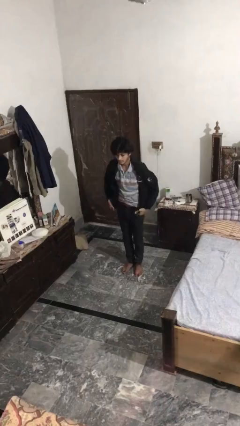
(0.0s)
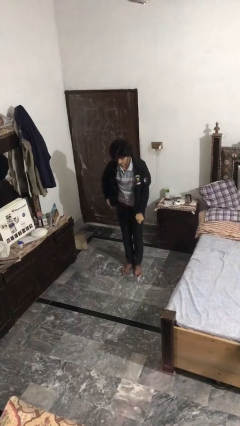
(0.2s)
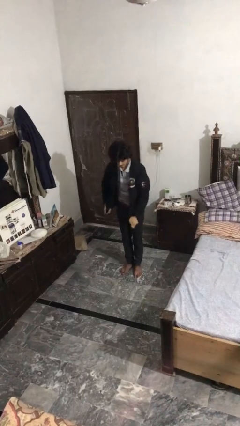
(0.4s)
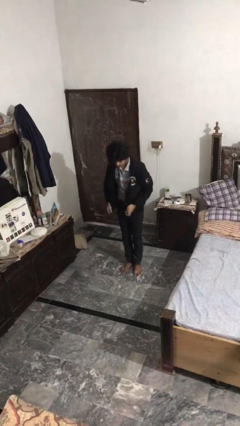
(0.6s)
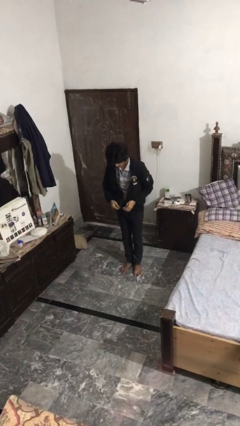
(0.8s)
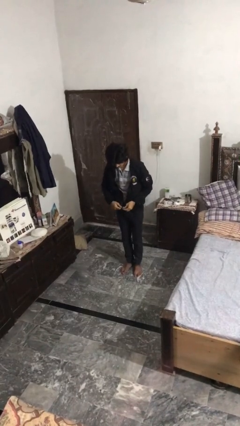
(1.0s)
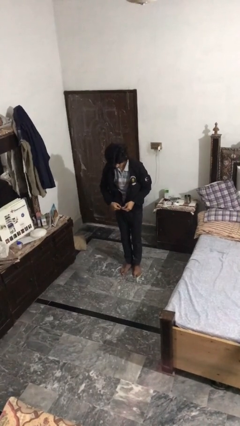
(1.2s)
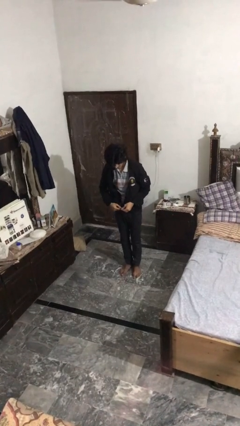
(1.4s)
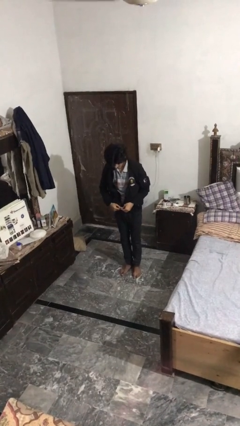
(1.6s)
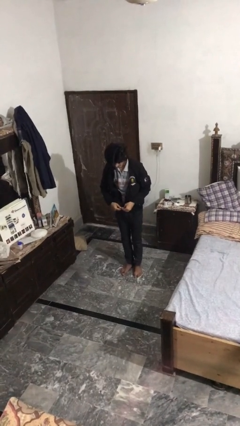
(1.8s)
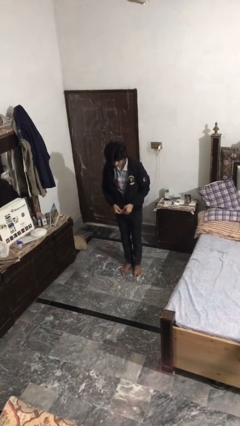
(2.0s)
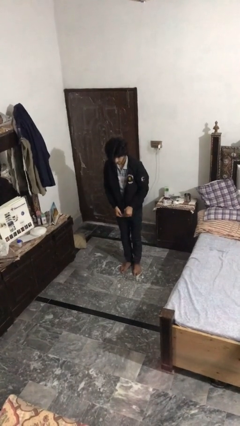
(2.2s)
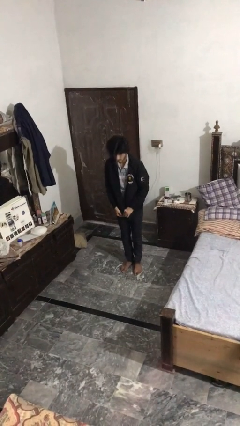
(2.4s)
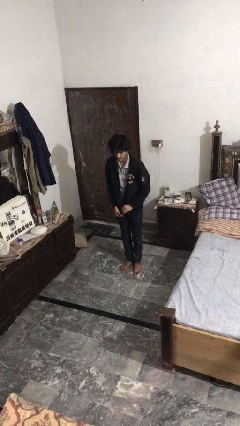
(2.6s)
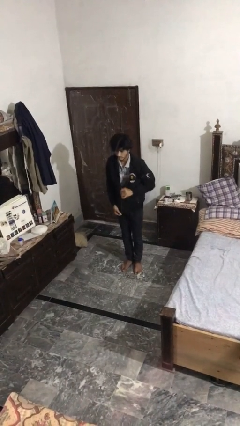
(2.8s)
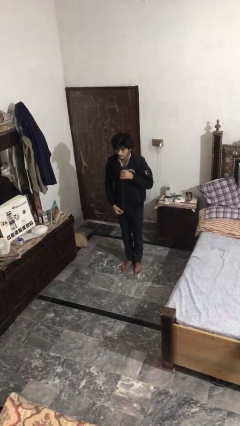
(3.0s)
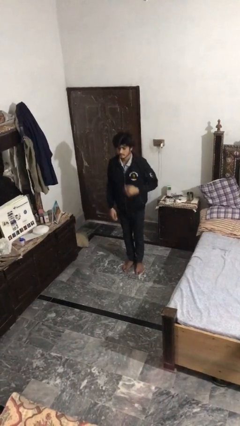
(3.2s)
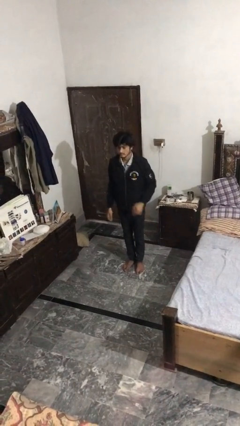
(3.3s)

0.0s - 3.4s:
person zips up jacket

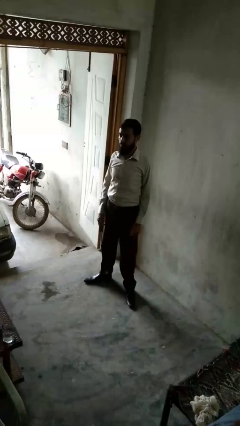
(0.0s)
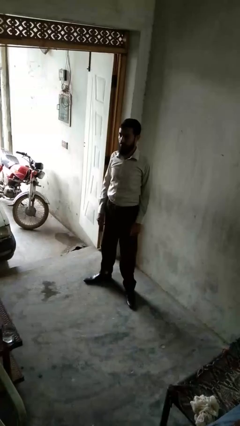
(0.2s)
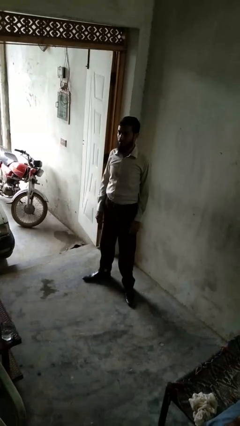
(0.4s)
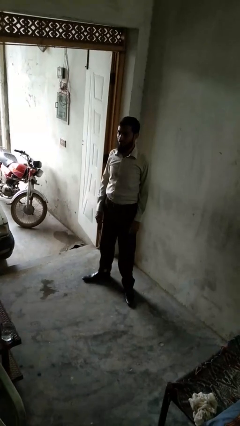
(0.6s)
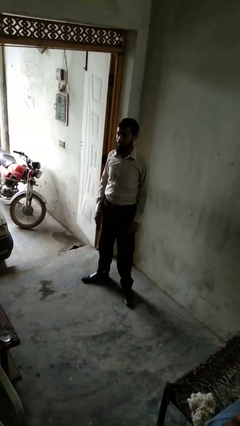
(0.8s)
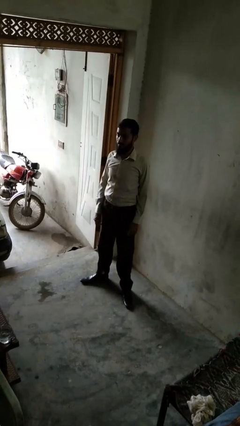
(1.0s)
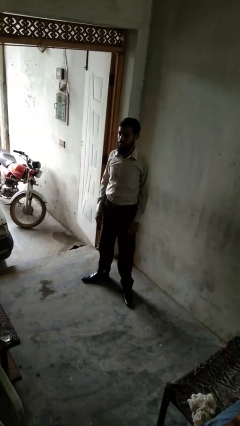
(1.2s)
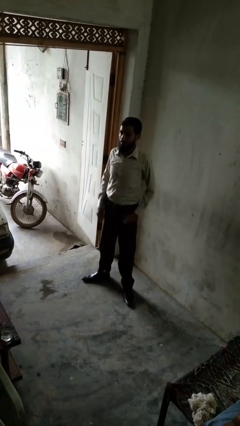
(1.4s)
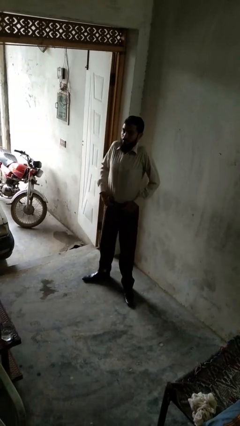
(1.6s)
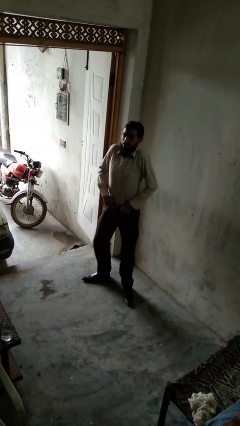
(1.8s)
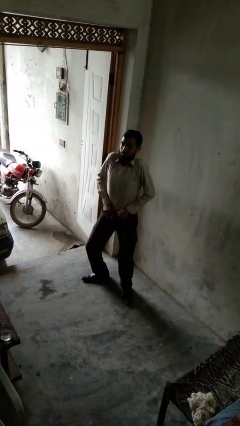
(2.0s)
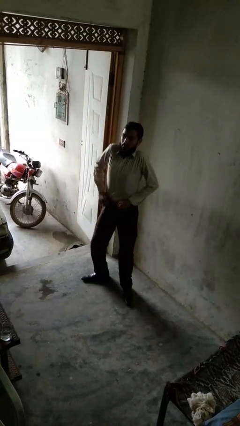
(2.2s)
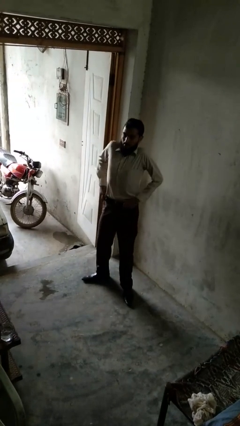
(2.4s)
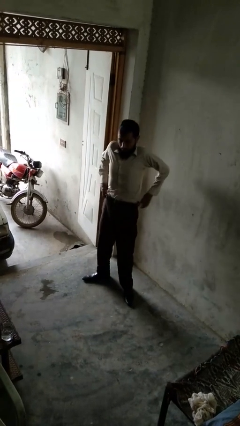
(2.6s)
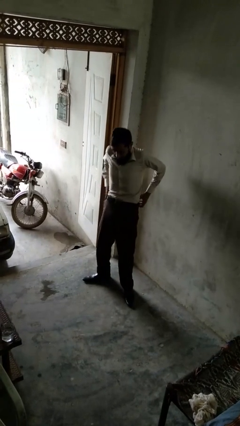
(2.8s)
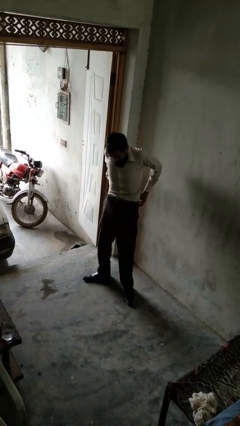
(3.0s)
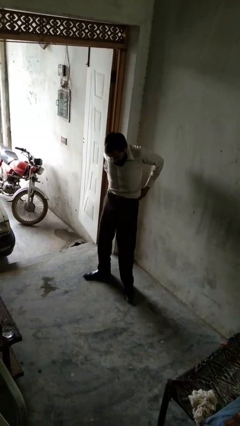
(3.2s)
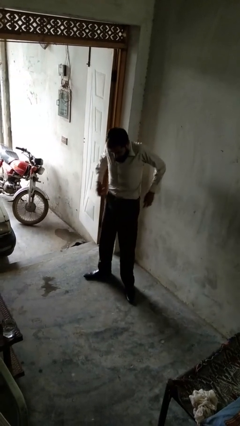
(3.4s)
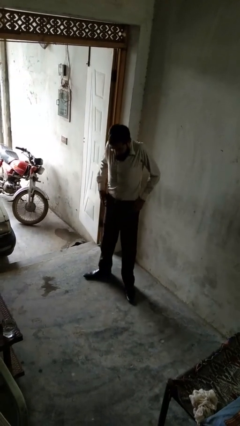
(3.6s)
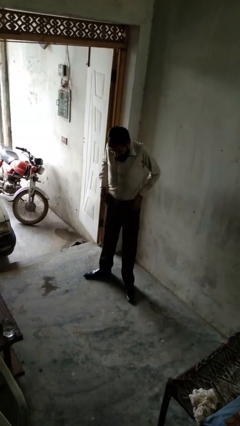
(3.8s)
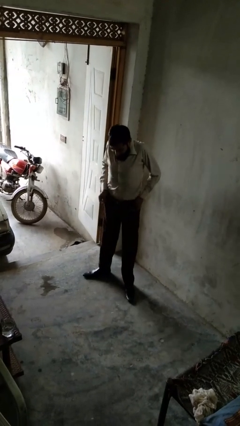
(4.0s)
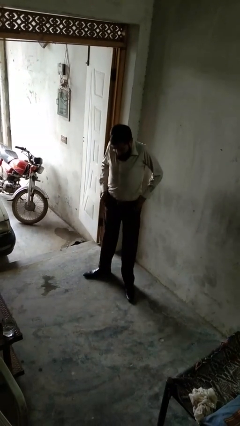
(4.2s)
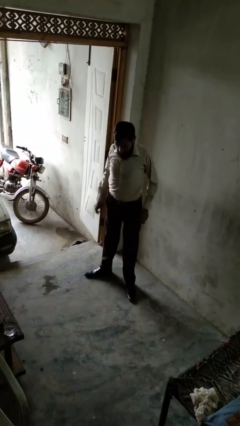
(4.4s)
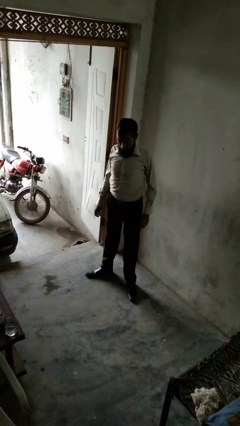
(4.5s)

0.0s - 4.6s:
person hikes up pants

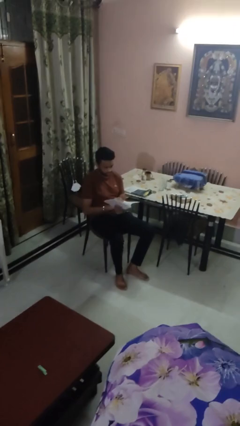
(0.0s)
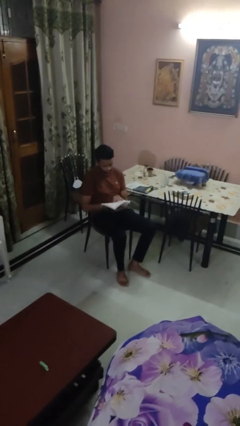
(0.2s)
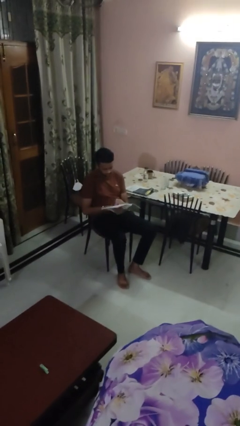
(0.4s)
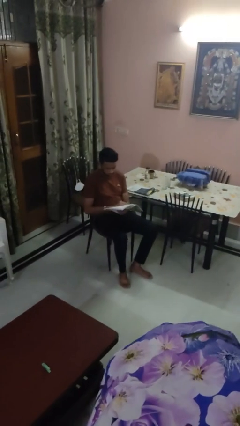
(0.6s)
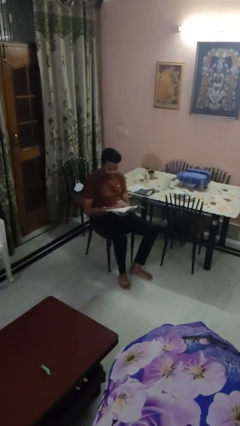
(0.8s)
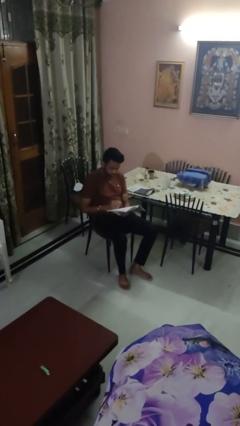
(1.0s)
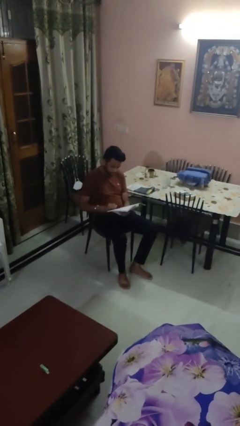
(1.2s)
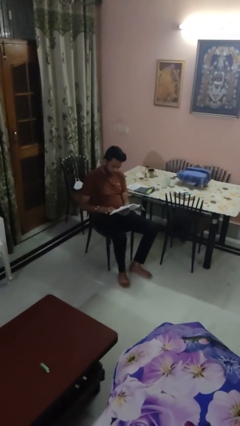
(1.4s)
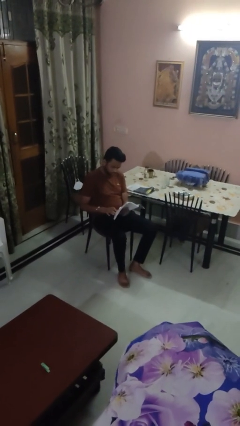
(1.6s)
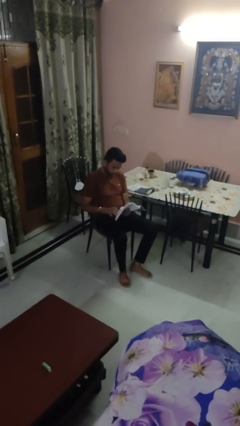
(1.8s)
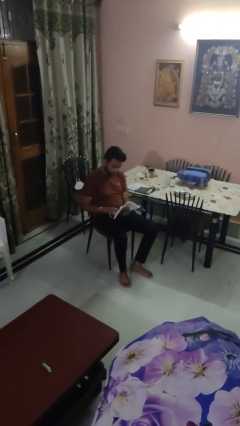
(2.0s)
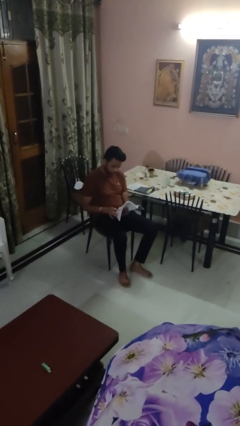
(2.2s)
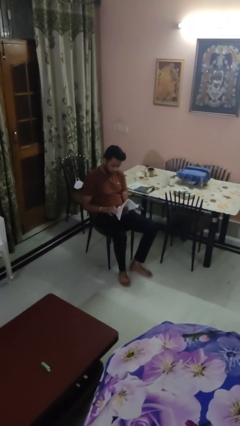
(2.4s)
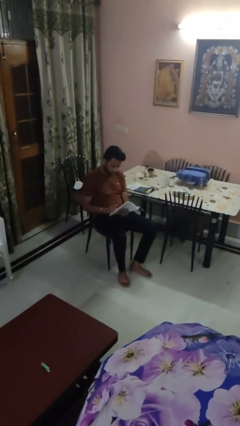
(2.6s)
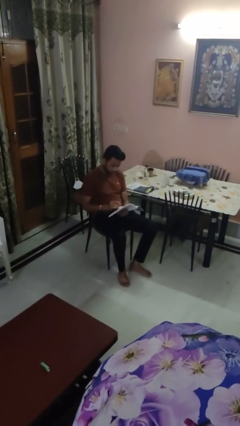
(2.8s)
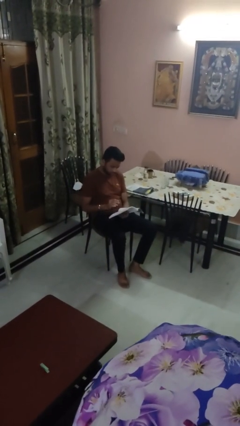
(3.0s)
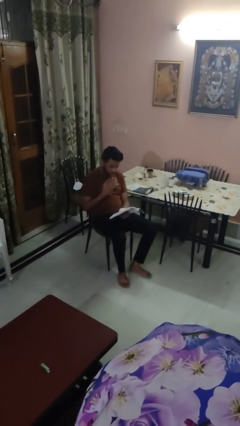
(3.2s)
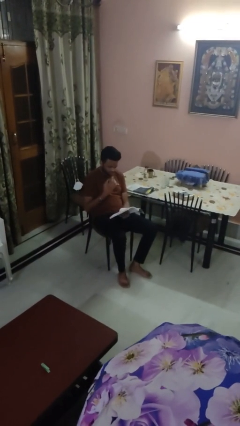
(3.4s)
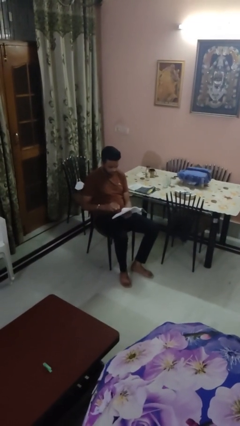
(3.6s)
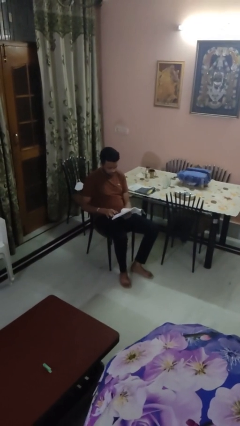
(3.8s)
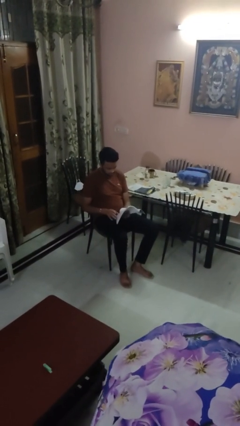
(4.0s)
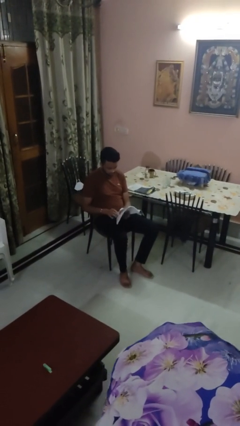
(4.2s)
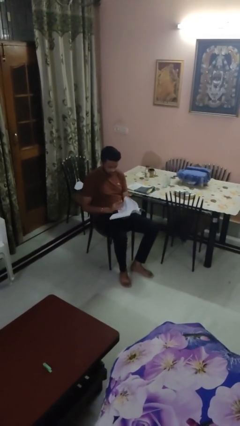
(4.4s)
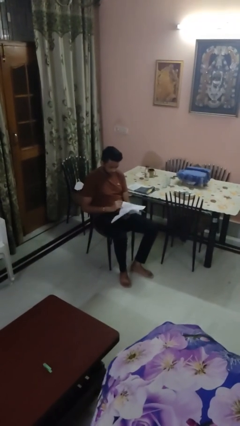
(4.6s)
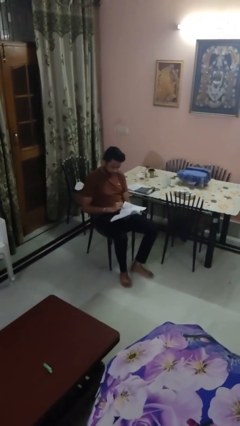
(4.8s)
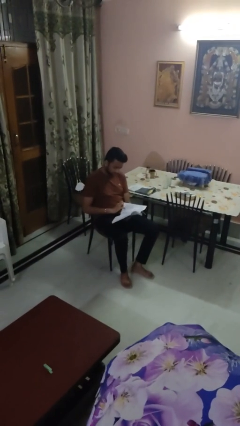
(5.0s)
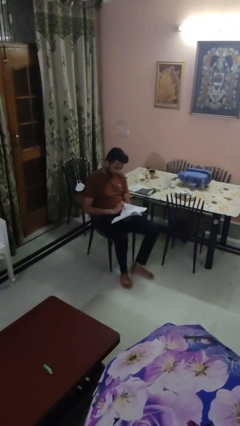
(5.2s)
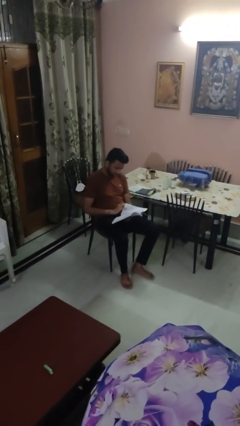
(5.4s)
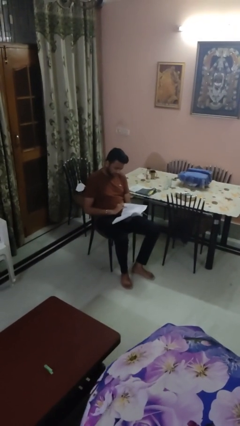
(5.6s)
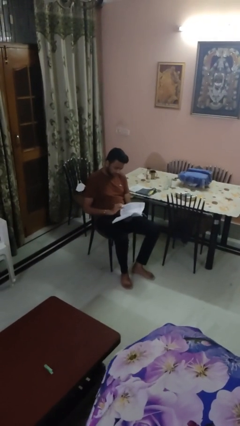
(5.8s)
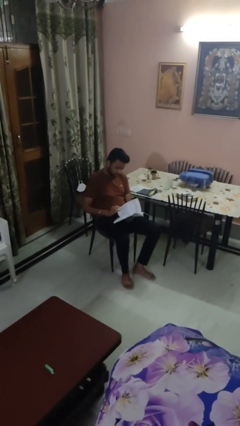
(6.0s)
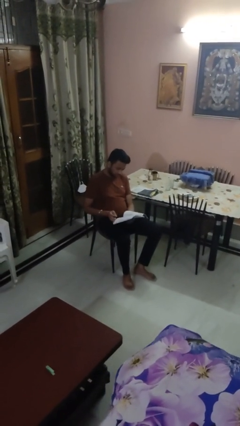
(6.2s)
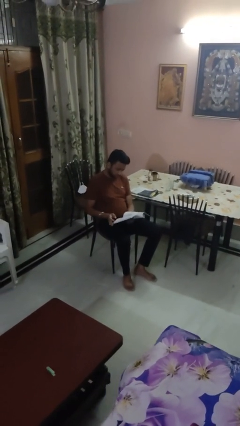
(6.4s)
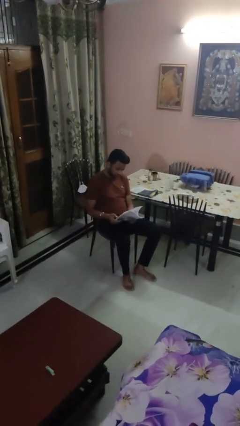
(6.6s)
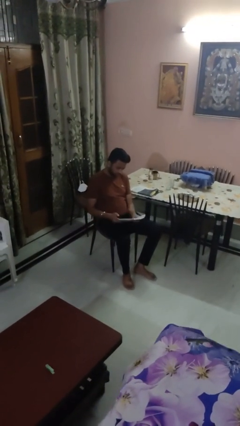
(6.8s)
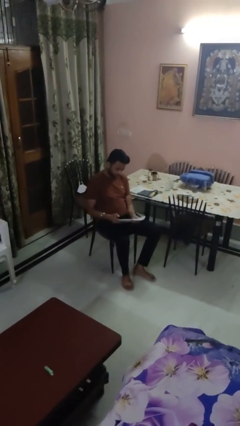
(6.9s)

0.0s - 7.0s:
person reads magazine

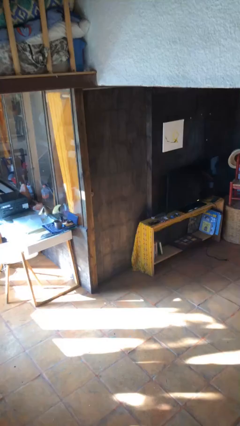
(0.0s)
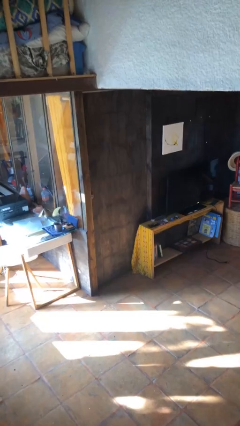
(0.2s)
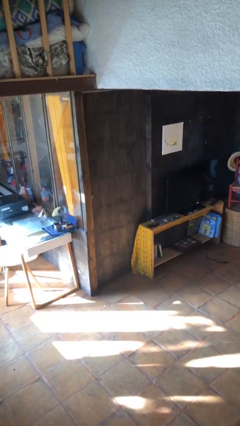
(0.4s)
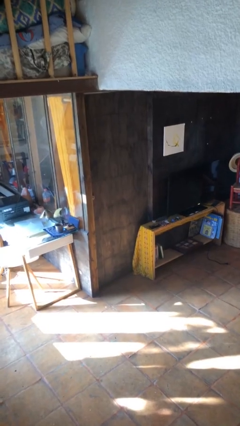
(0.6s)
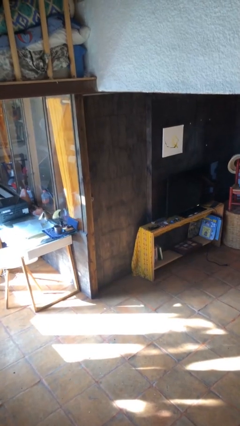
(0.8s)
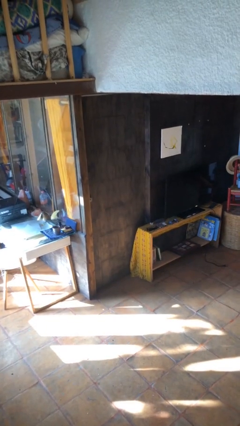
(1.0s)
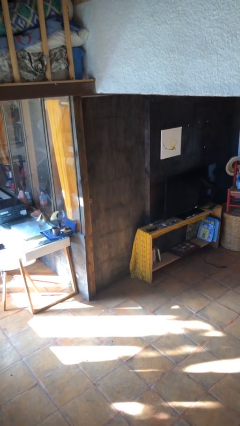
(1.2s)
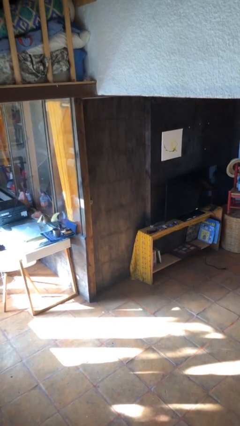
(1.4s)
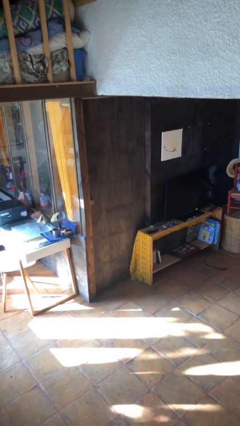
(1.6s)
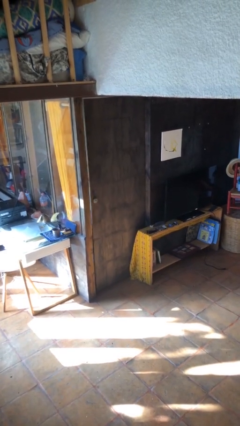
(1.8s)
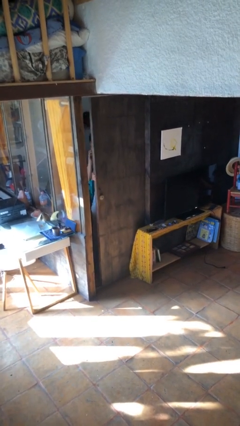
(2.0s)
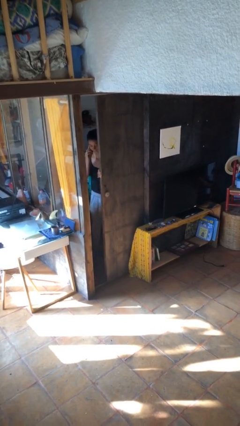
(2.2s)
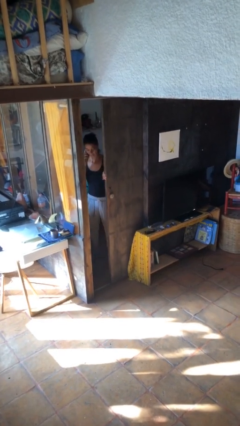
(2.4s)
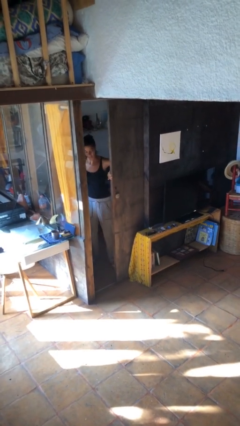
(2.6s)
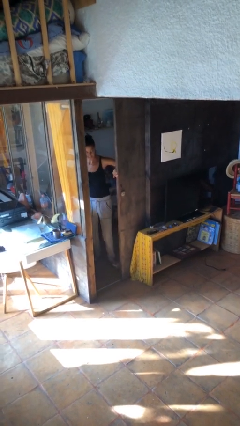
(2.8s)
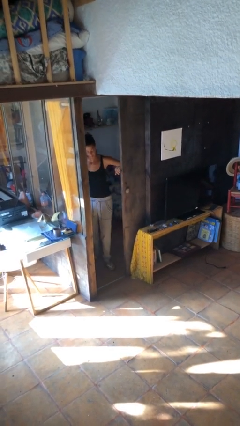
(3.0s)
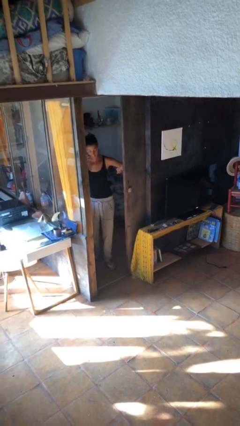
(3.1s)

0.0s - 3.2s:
person opens facility door
